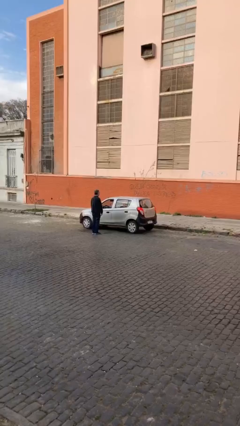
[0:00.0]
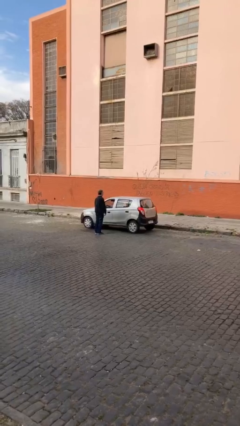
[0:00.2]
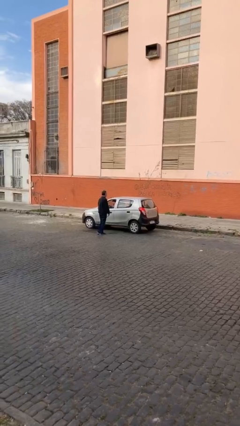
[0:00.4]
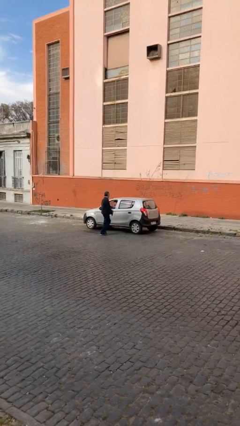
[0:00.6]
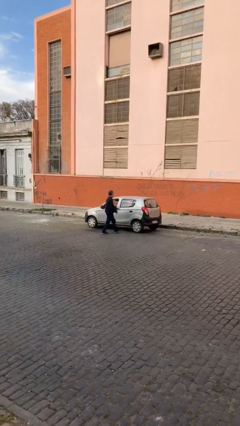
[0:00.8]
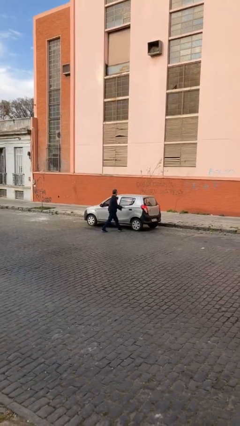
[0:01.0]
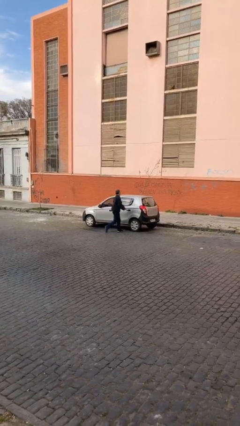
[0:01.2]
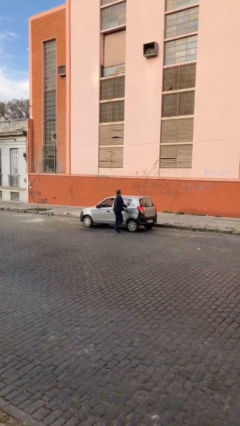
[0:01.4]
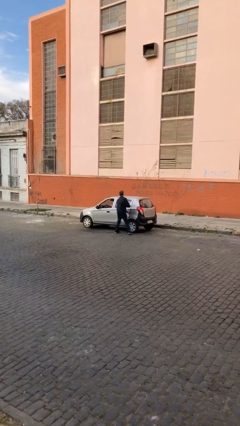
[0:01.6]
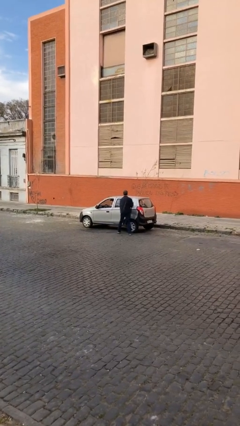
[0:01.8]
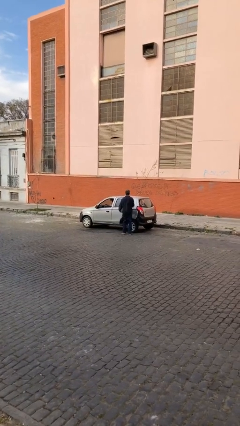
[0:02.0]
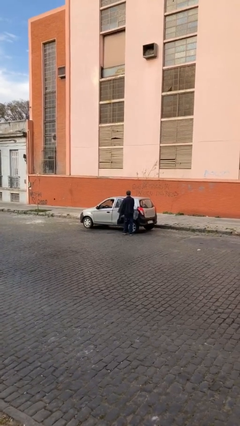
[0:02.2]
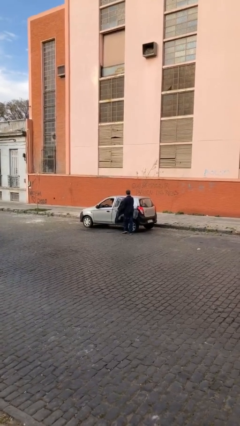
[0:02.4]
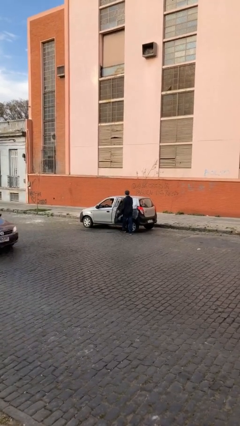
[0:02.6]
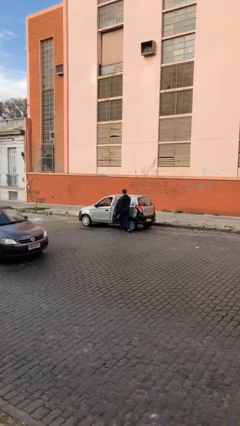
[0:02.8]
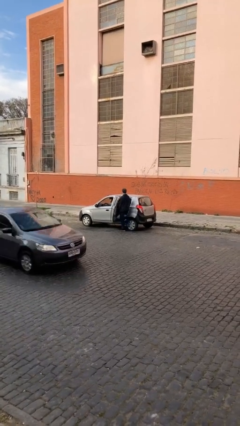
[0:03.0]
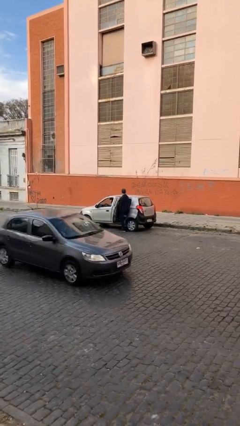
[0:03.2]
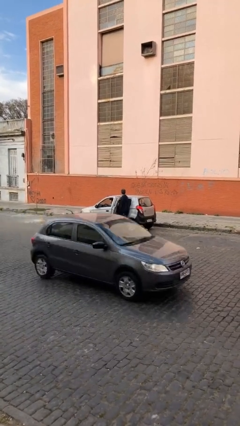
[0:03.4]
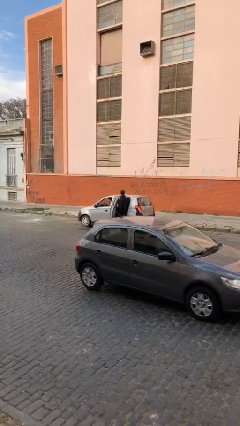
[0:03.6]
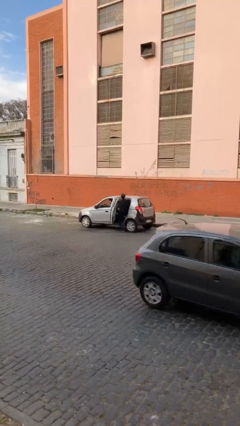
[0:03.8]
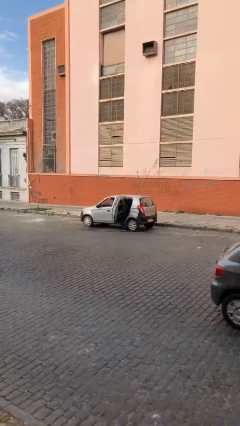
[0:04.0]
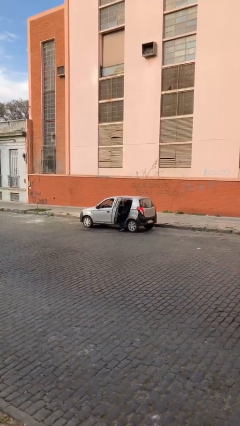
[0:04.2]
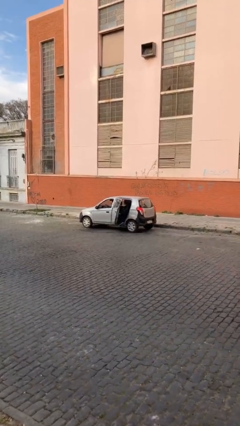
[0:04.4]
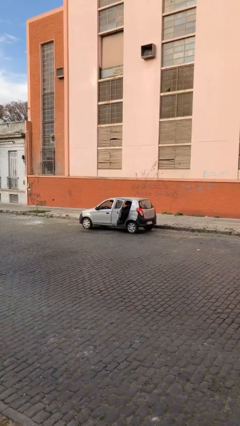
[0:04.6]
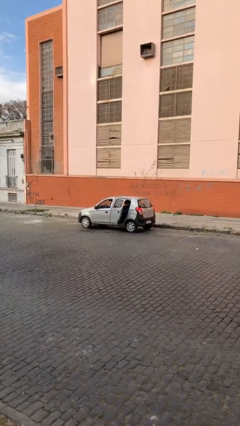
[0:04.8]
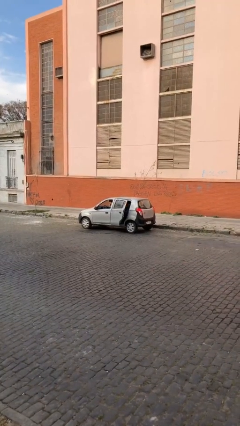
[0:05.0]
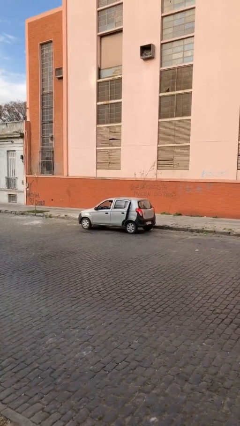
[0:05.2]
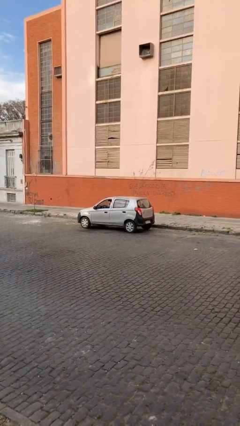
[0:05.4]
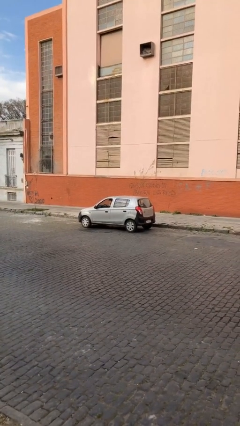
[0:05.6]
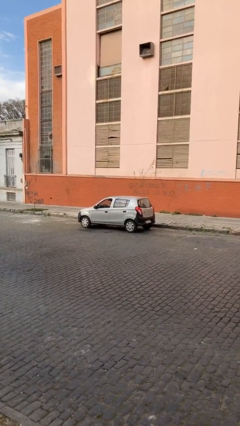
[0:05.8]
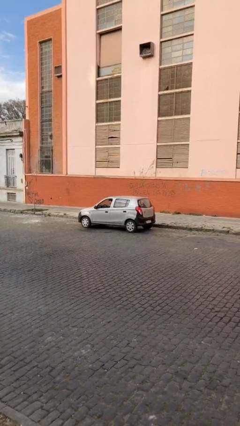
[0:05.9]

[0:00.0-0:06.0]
car picks up person

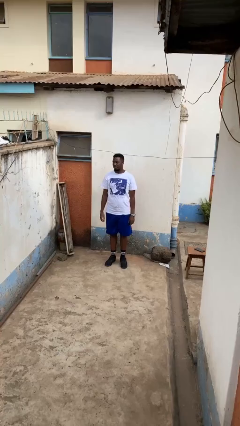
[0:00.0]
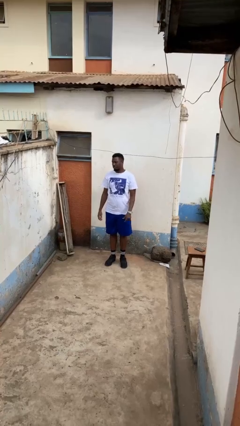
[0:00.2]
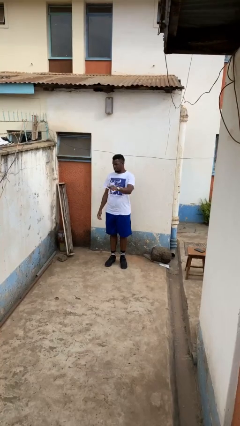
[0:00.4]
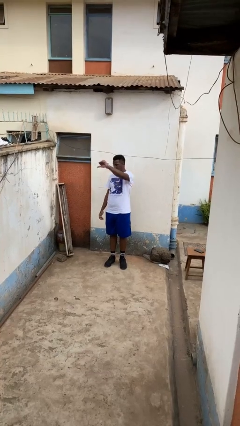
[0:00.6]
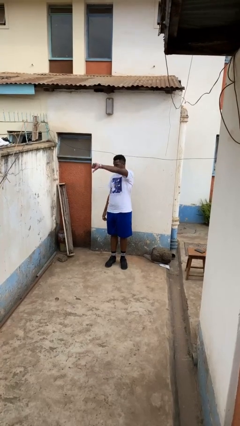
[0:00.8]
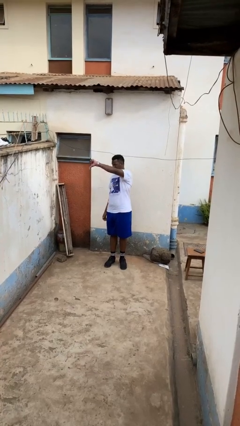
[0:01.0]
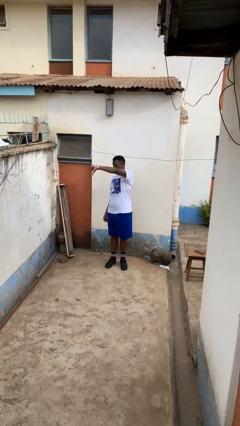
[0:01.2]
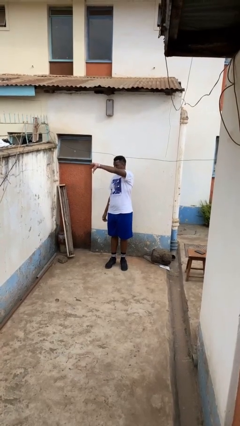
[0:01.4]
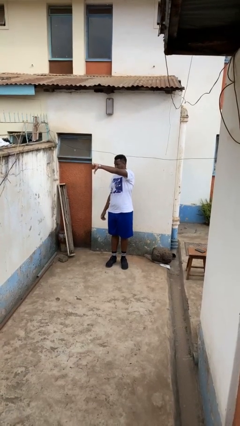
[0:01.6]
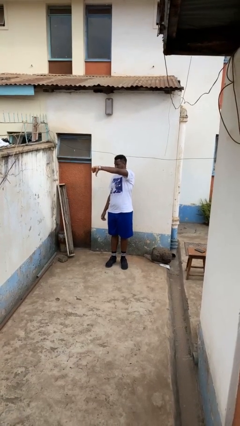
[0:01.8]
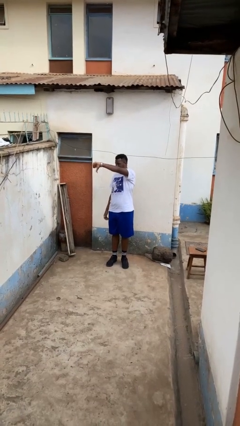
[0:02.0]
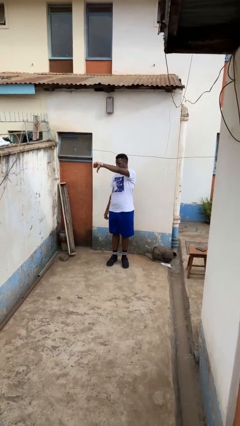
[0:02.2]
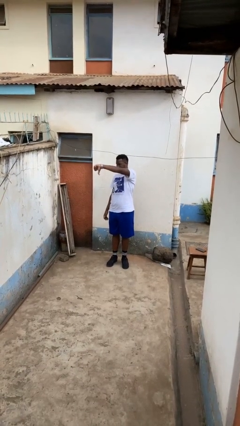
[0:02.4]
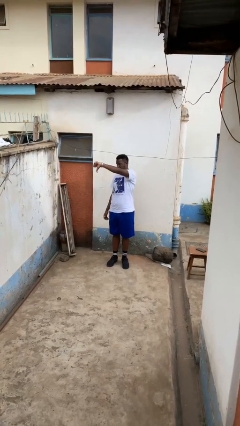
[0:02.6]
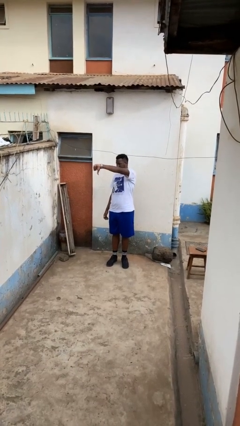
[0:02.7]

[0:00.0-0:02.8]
person gestures thumbs down

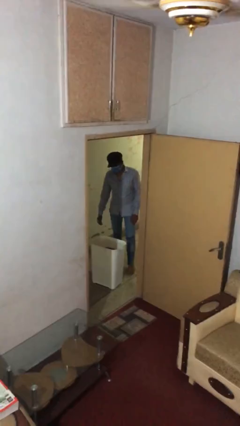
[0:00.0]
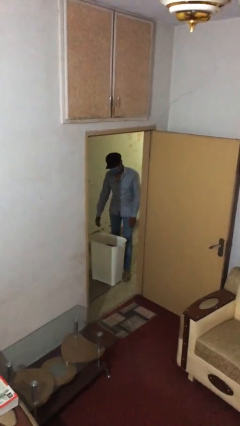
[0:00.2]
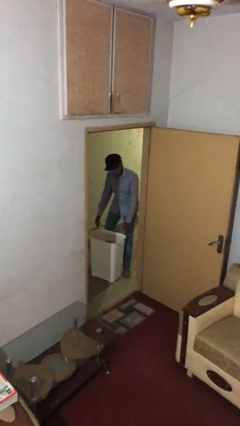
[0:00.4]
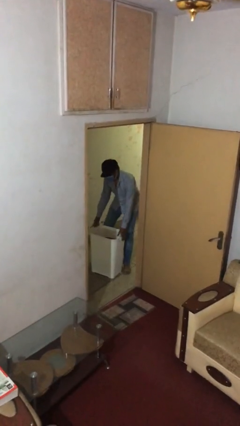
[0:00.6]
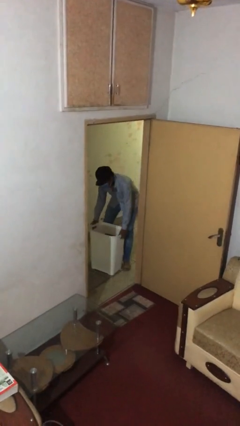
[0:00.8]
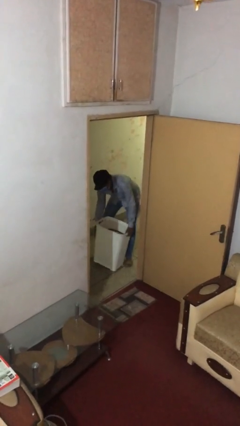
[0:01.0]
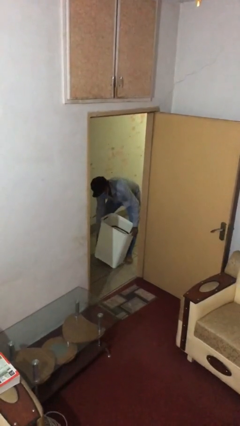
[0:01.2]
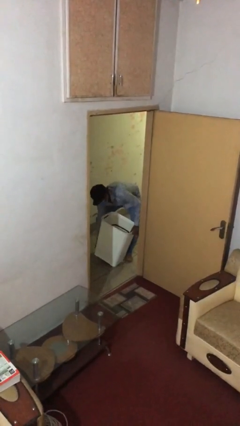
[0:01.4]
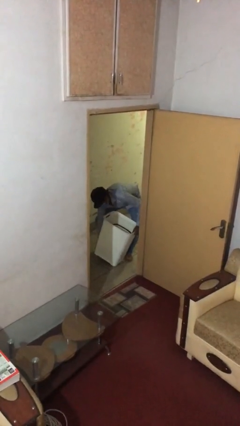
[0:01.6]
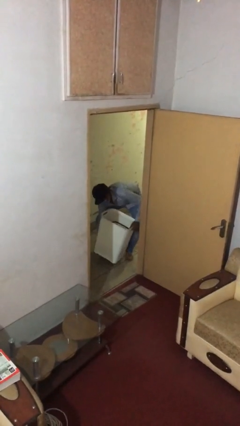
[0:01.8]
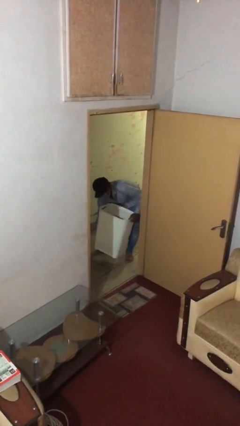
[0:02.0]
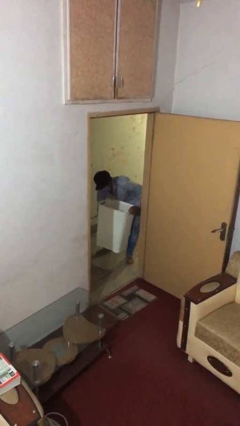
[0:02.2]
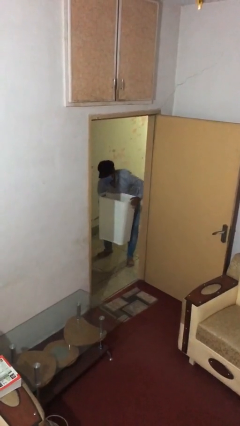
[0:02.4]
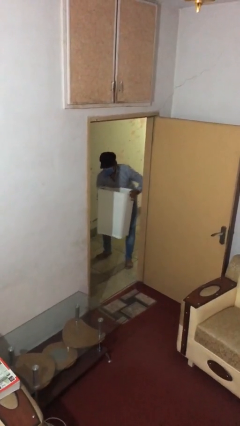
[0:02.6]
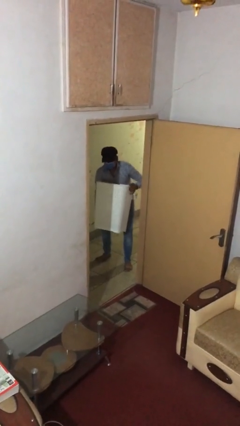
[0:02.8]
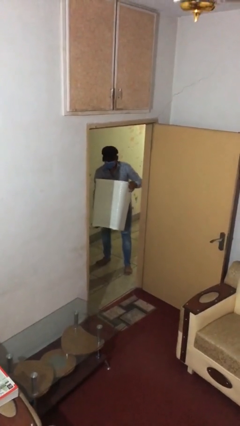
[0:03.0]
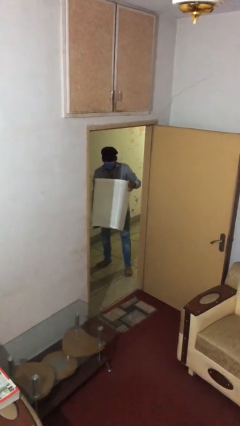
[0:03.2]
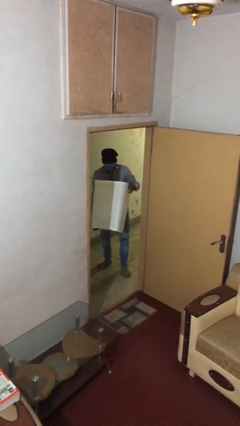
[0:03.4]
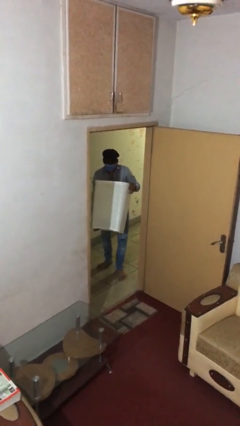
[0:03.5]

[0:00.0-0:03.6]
person picks up object from floor

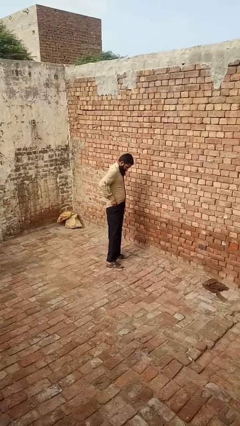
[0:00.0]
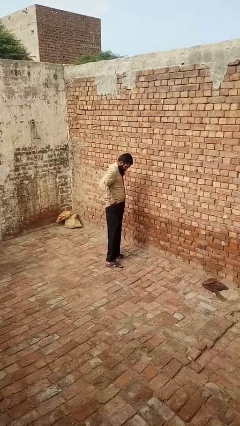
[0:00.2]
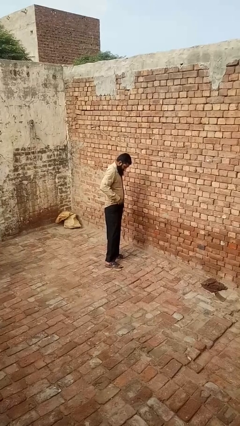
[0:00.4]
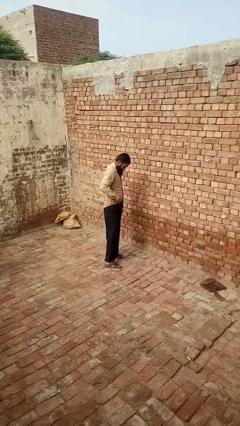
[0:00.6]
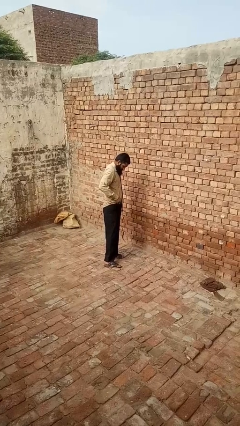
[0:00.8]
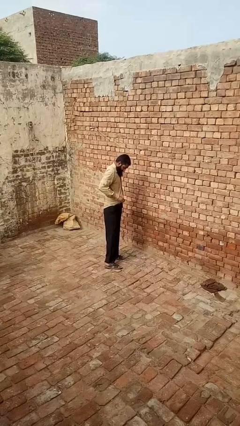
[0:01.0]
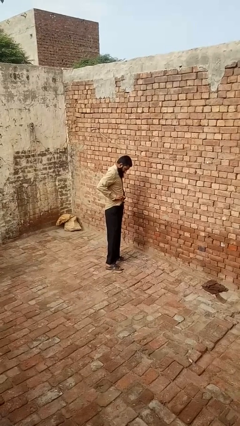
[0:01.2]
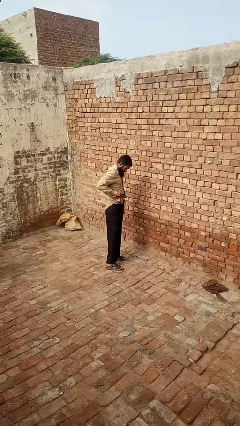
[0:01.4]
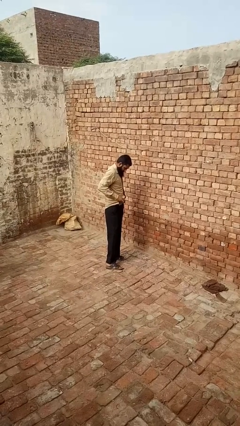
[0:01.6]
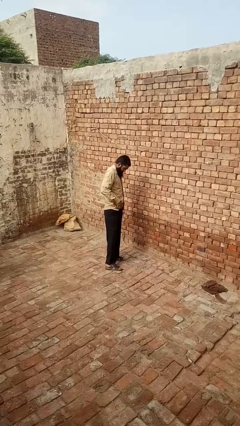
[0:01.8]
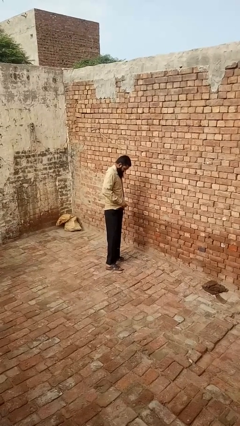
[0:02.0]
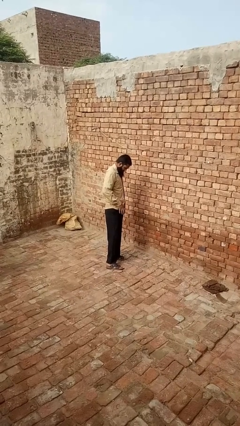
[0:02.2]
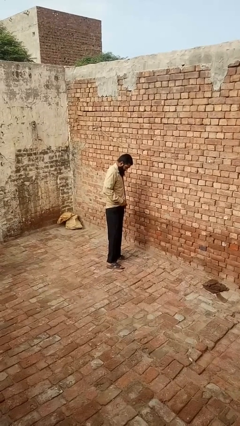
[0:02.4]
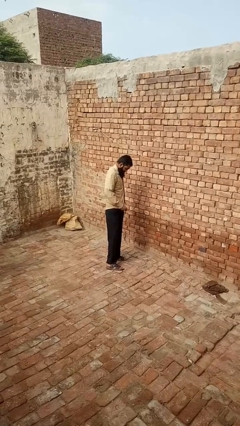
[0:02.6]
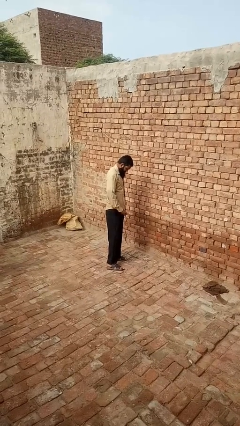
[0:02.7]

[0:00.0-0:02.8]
person untucks shirt

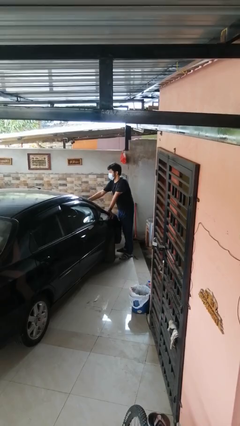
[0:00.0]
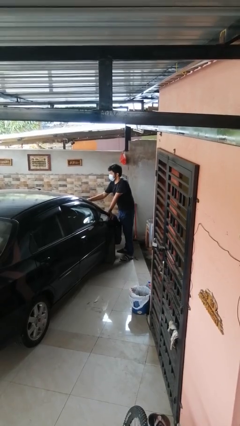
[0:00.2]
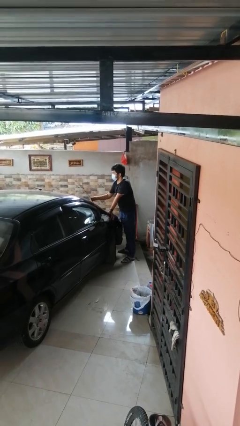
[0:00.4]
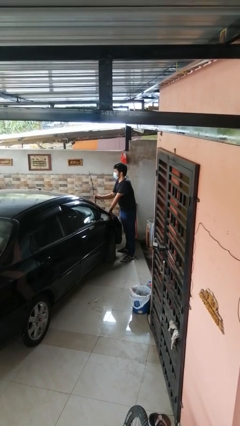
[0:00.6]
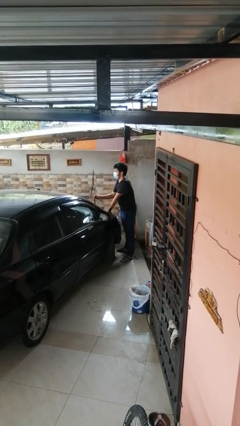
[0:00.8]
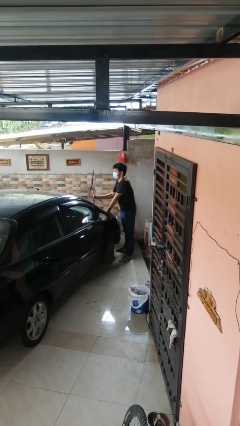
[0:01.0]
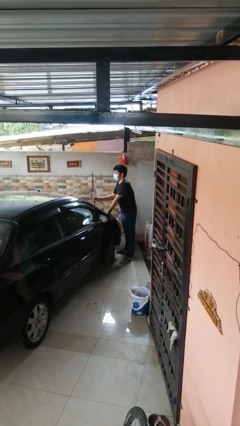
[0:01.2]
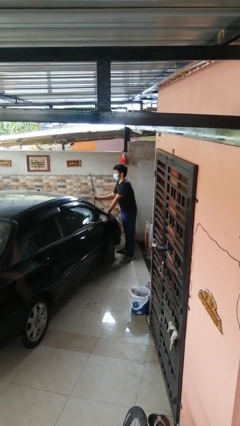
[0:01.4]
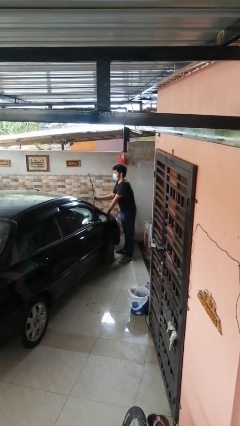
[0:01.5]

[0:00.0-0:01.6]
person flips up car wipers

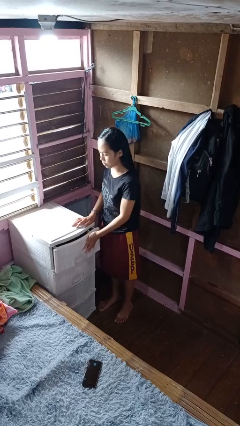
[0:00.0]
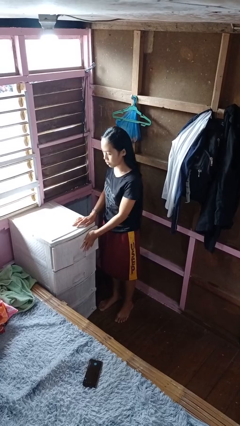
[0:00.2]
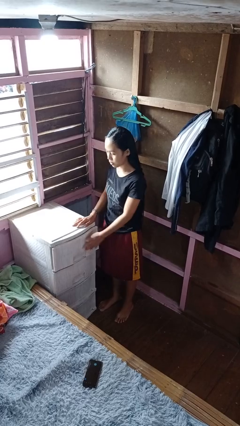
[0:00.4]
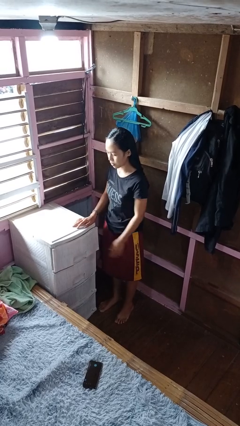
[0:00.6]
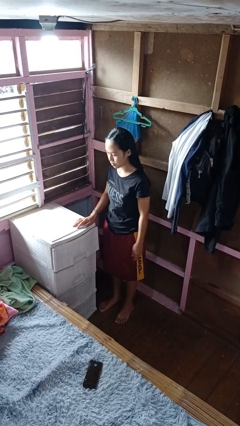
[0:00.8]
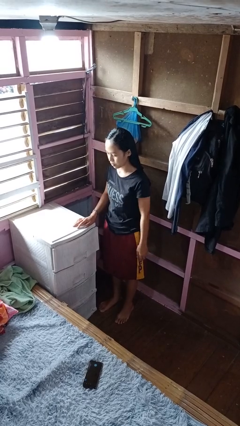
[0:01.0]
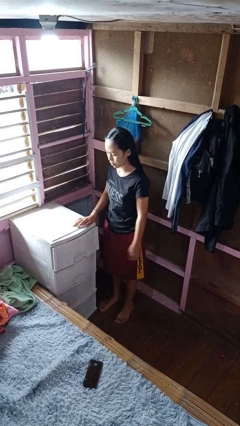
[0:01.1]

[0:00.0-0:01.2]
person closes dresser drawer
